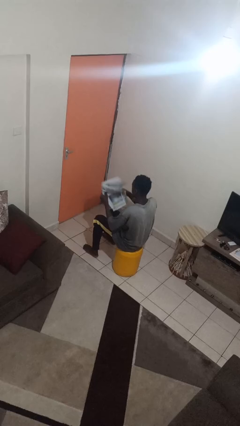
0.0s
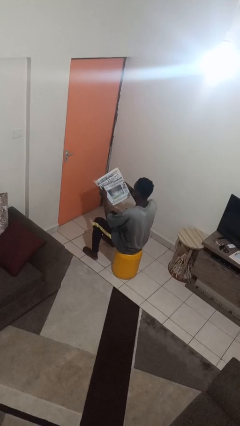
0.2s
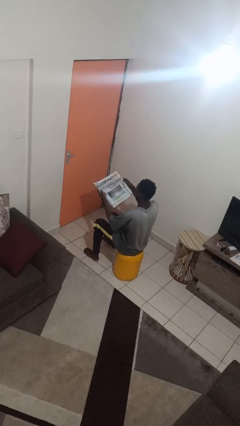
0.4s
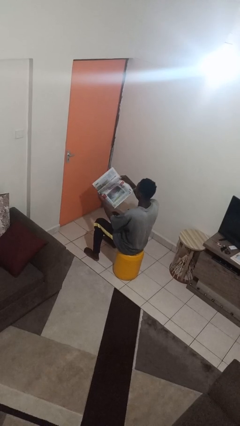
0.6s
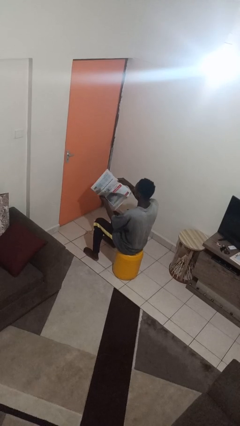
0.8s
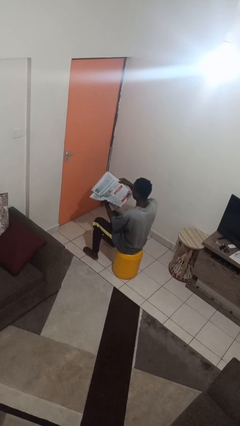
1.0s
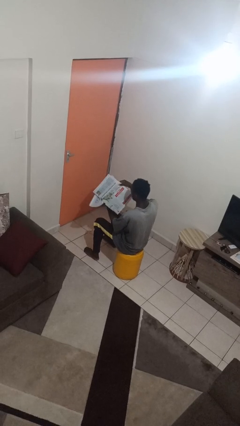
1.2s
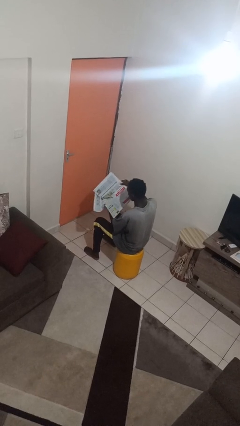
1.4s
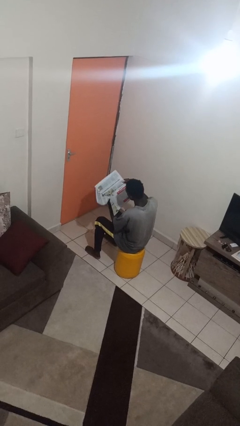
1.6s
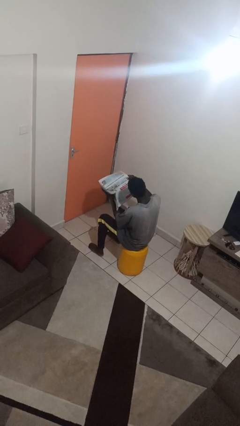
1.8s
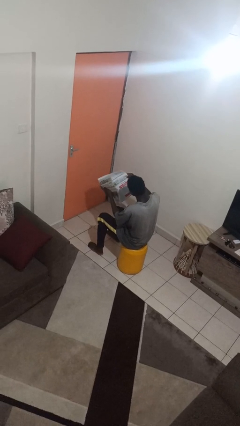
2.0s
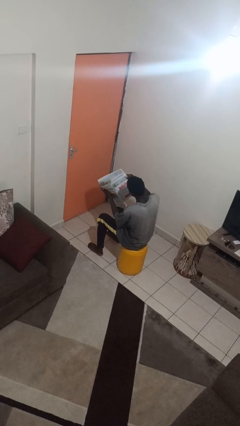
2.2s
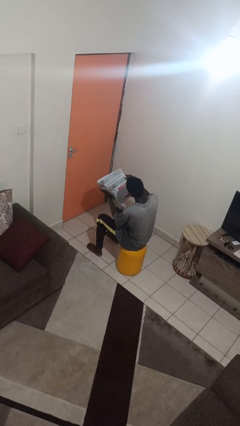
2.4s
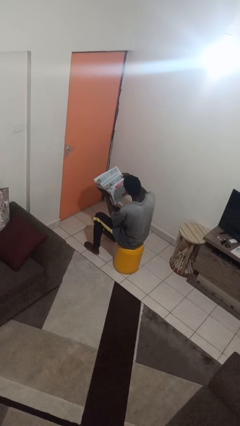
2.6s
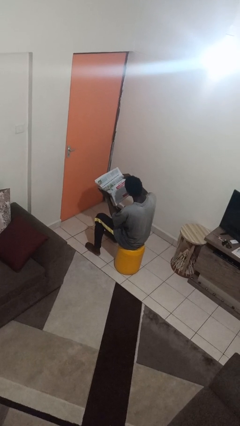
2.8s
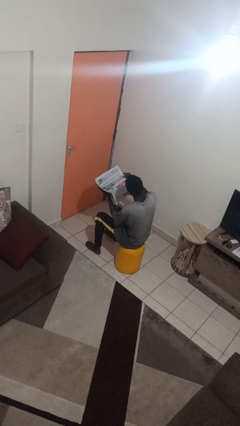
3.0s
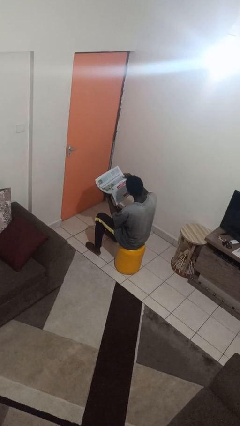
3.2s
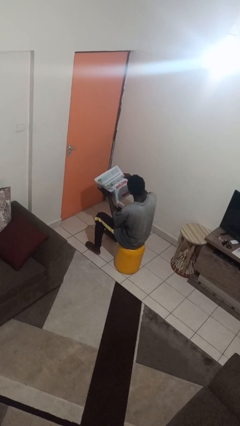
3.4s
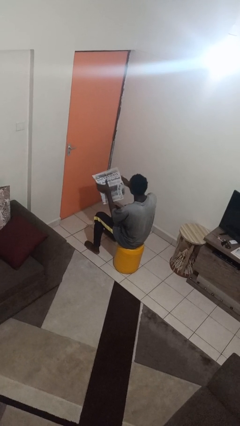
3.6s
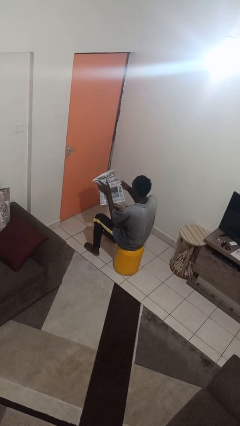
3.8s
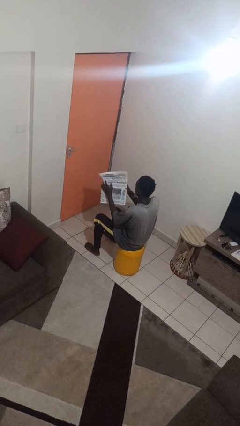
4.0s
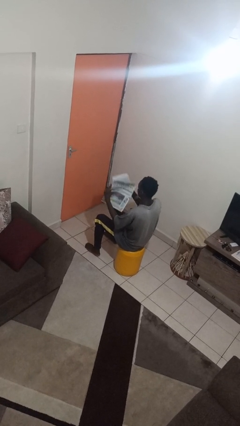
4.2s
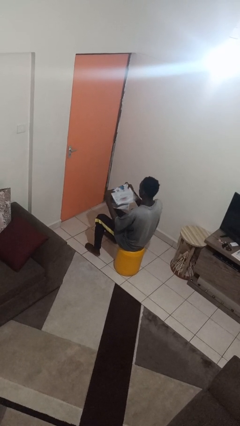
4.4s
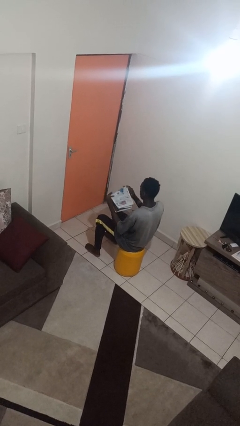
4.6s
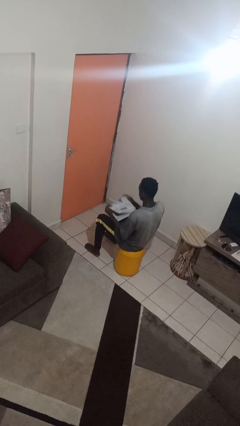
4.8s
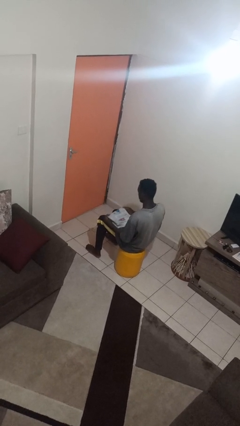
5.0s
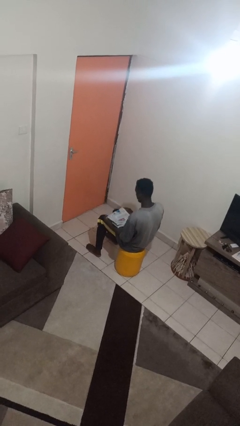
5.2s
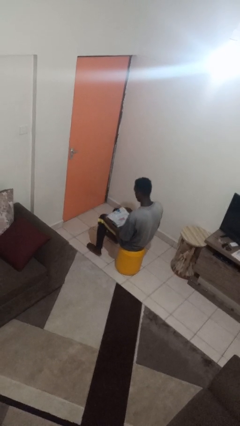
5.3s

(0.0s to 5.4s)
person reads newspaper

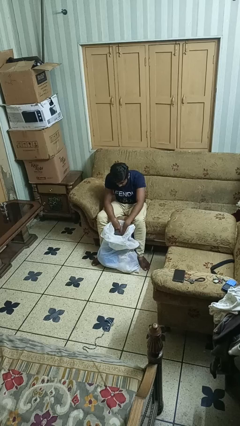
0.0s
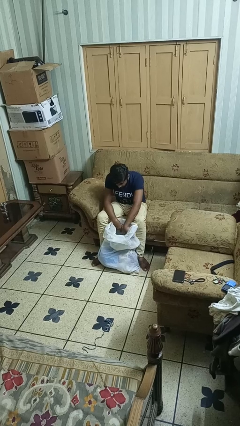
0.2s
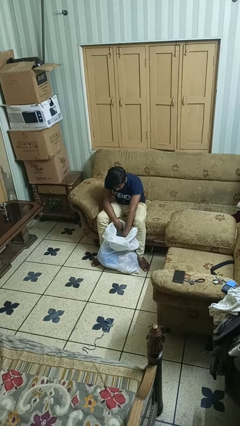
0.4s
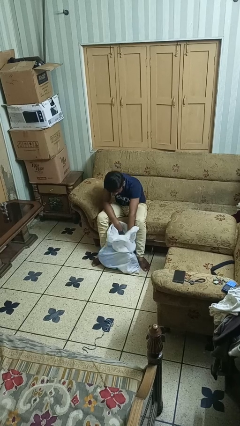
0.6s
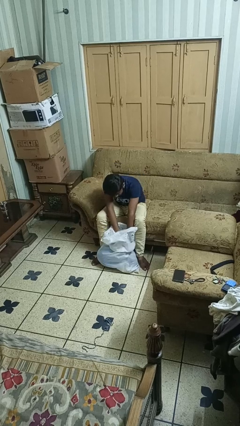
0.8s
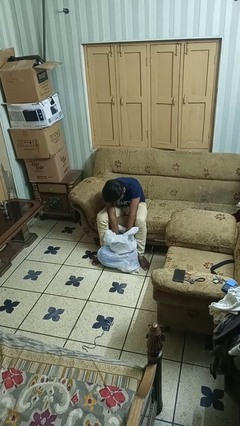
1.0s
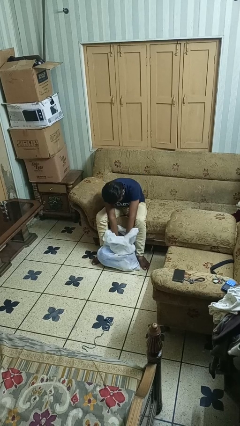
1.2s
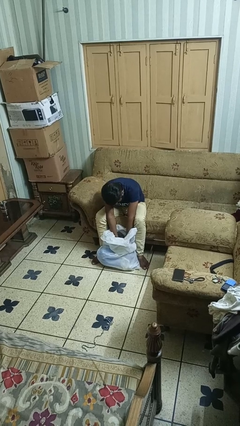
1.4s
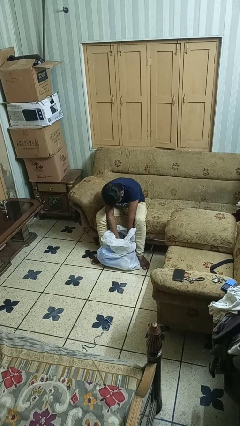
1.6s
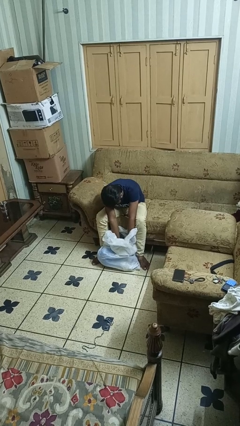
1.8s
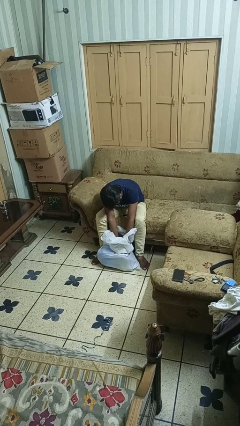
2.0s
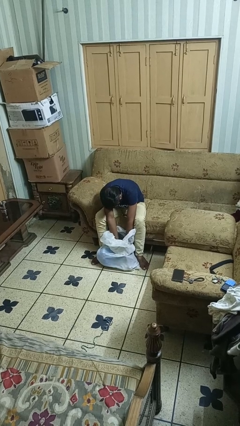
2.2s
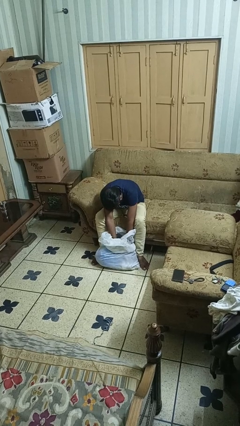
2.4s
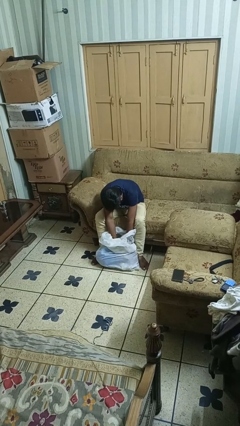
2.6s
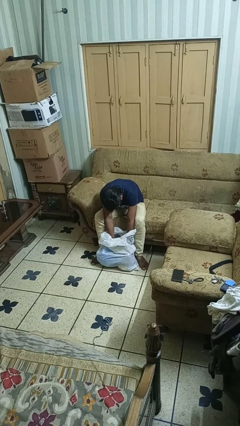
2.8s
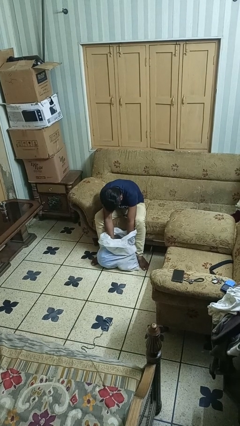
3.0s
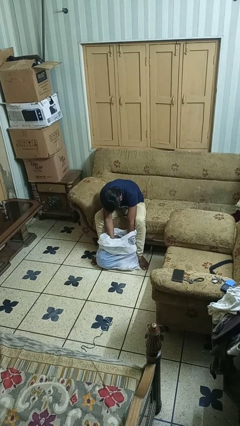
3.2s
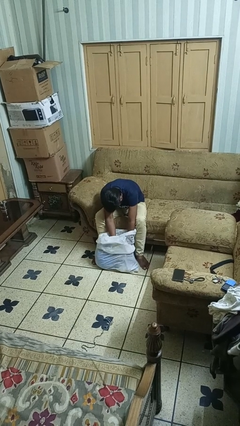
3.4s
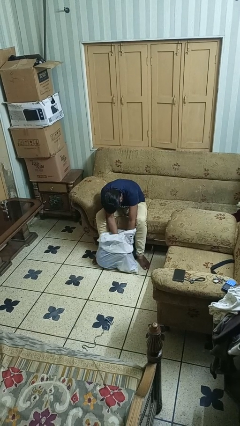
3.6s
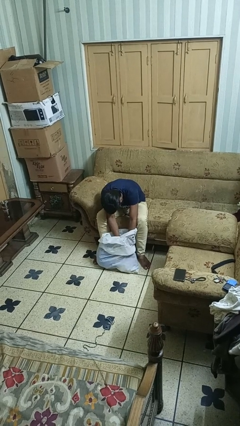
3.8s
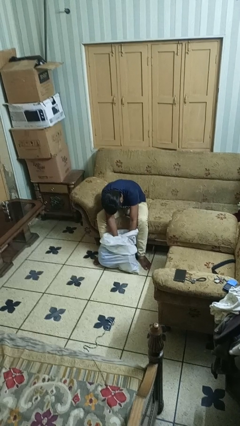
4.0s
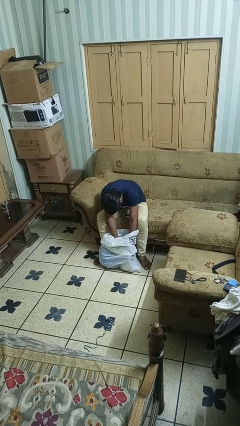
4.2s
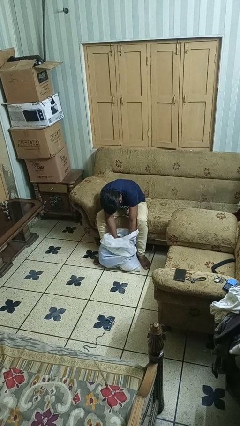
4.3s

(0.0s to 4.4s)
person searches in bag

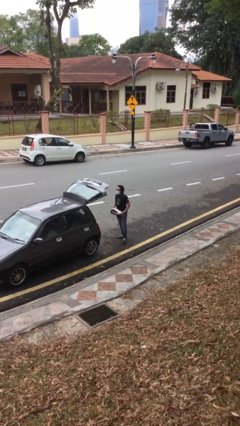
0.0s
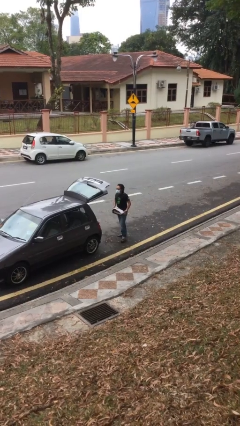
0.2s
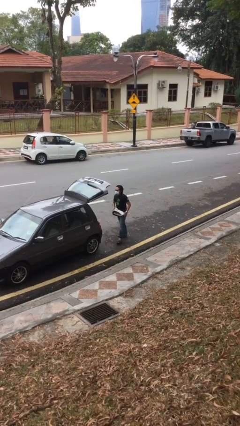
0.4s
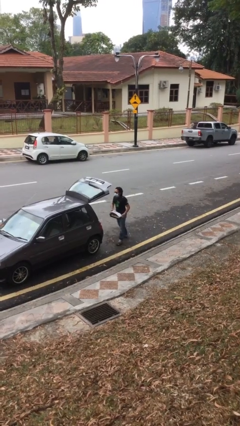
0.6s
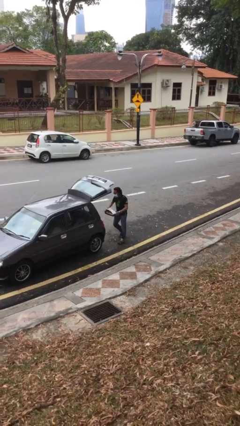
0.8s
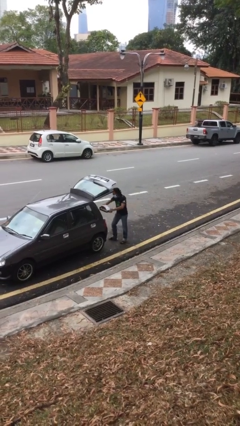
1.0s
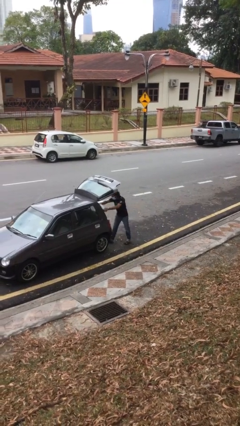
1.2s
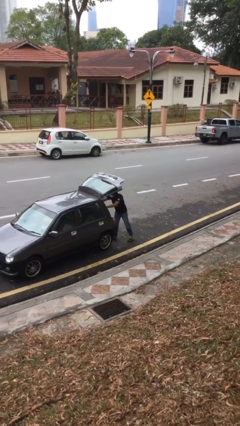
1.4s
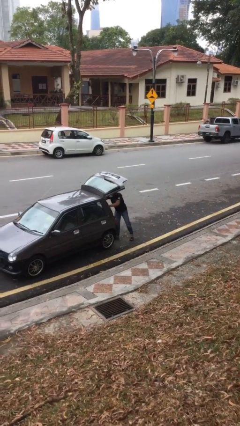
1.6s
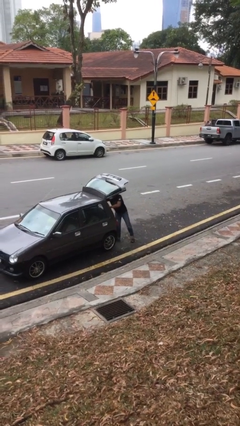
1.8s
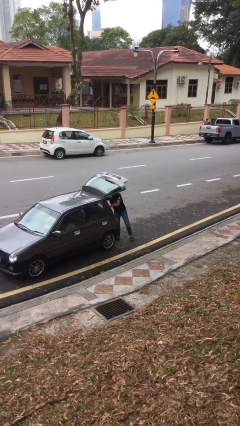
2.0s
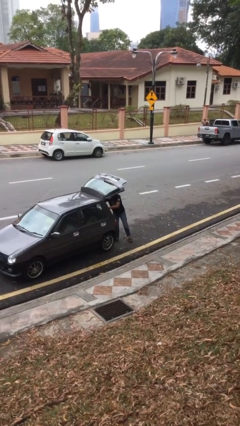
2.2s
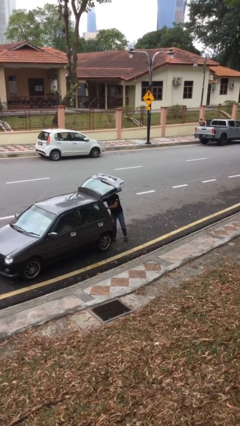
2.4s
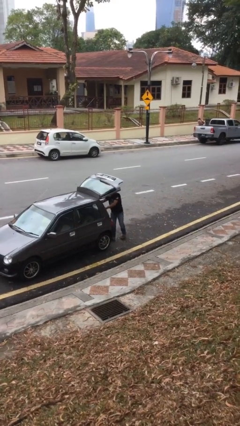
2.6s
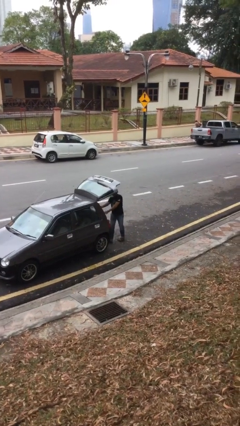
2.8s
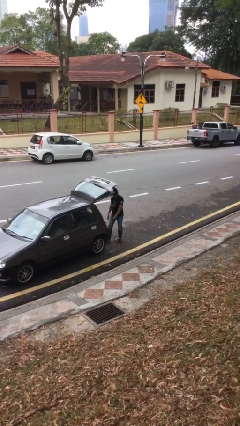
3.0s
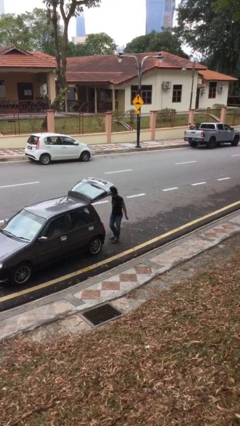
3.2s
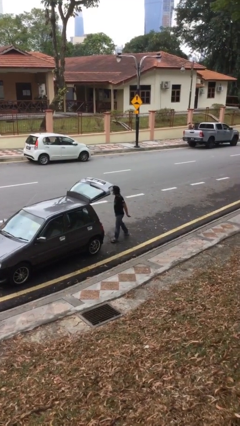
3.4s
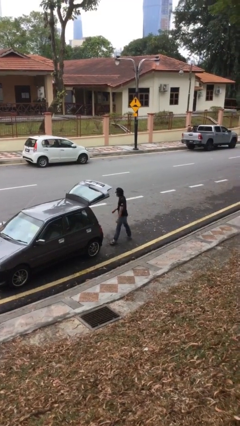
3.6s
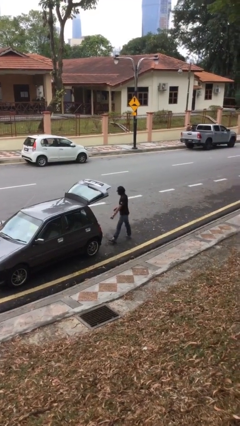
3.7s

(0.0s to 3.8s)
person loads car

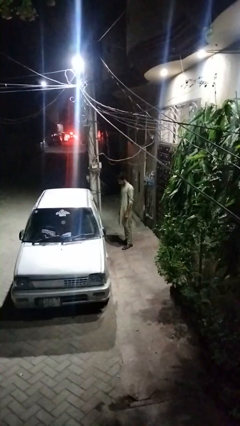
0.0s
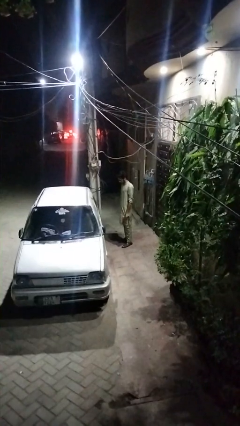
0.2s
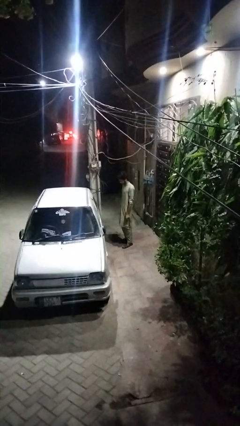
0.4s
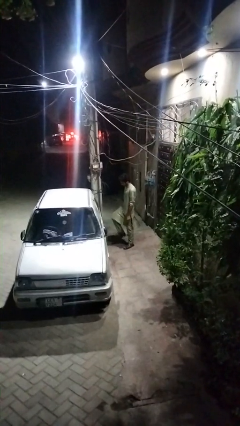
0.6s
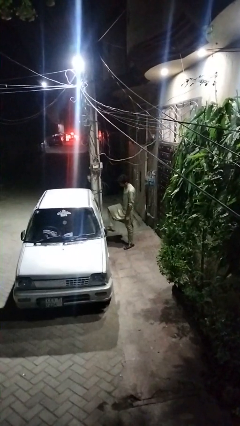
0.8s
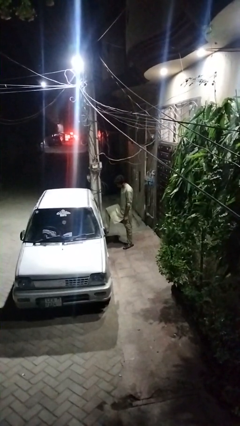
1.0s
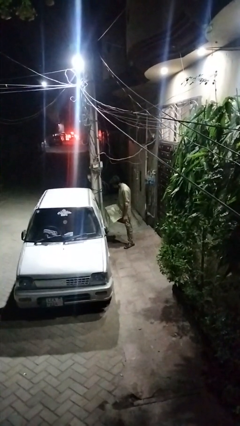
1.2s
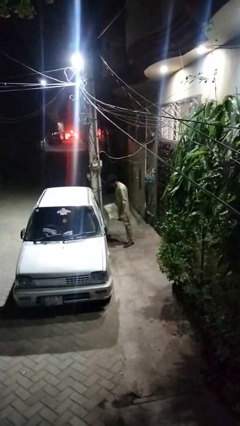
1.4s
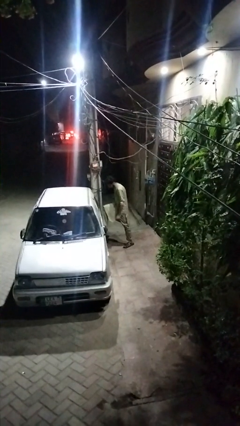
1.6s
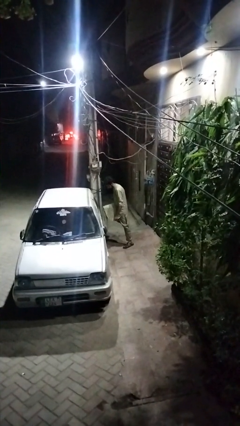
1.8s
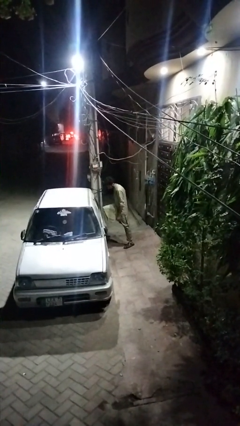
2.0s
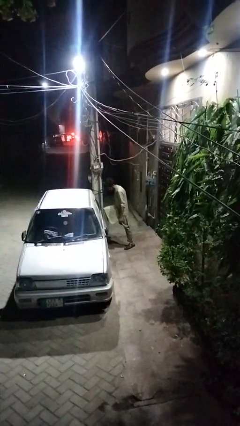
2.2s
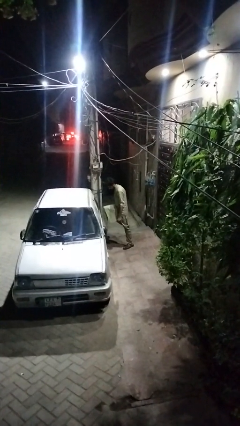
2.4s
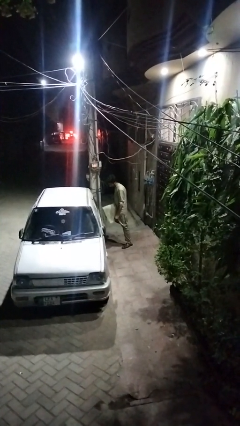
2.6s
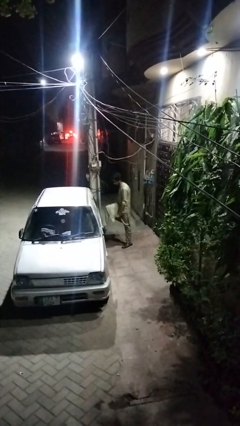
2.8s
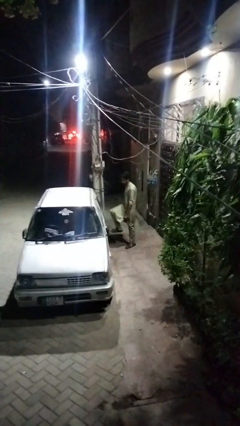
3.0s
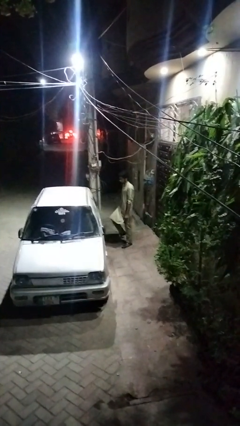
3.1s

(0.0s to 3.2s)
person kicks car tires

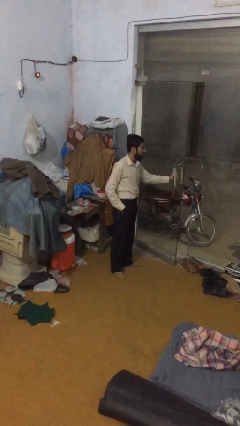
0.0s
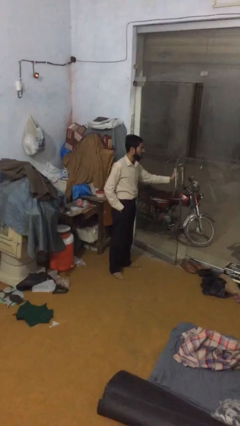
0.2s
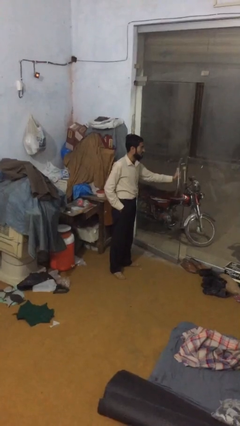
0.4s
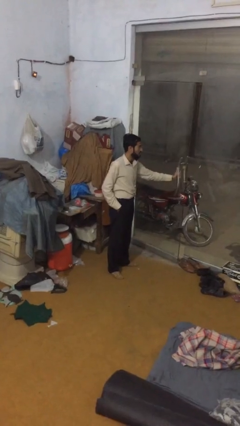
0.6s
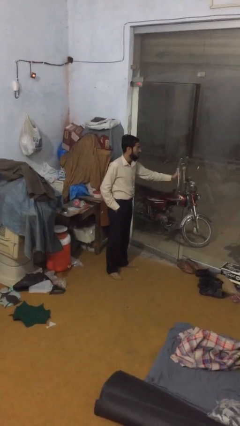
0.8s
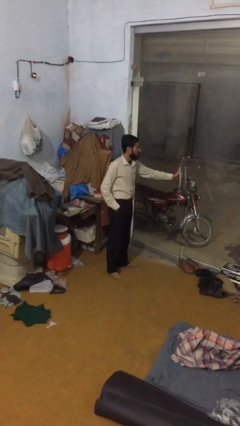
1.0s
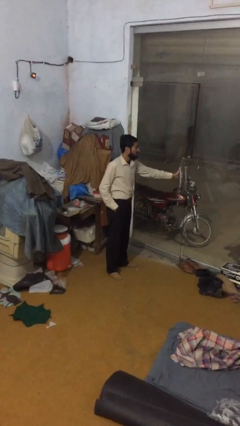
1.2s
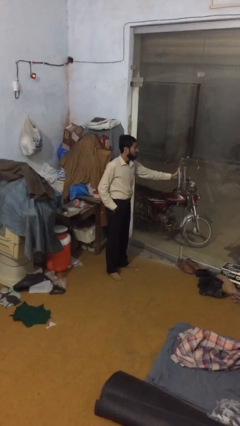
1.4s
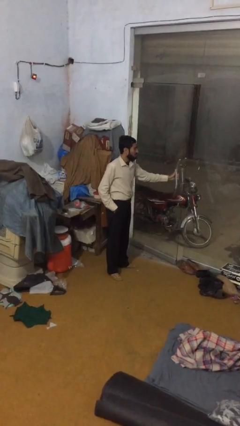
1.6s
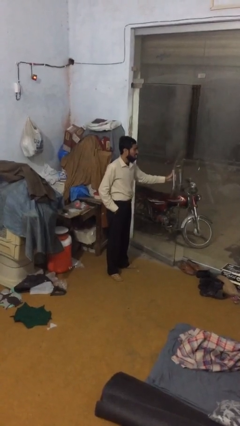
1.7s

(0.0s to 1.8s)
person opens facility door
